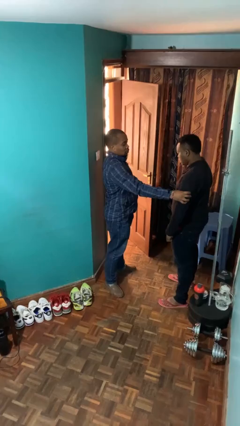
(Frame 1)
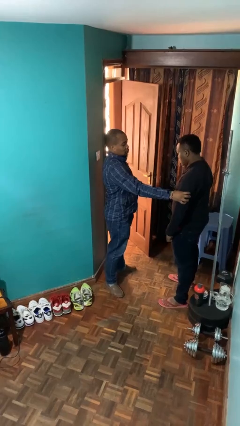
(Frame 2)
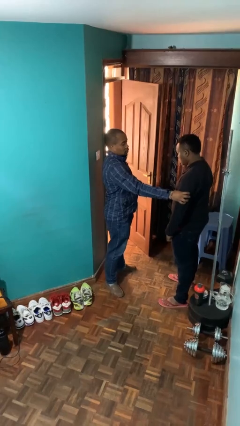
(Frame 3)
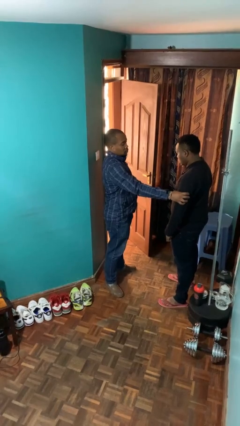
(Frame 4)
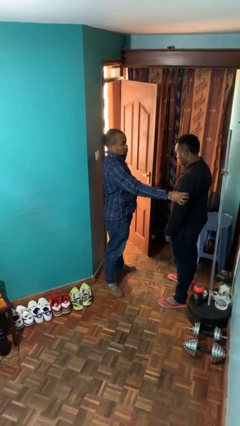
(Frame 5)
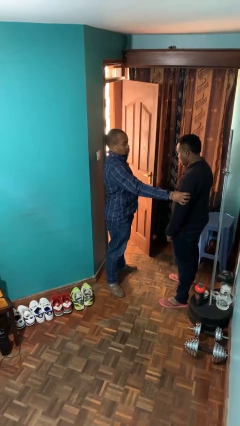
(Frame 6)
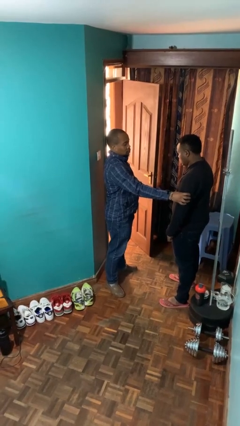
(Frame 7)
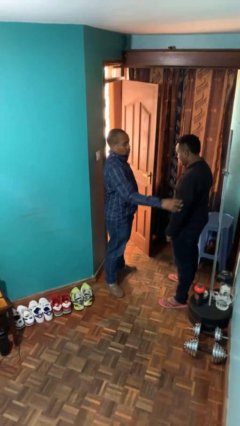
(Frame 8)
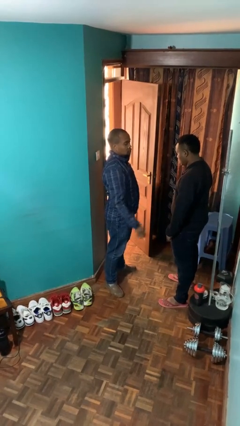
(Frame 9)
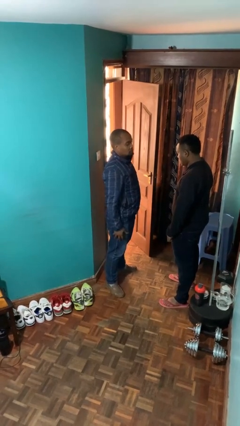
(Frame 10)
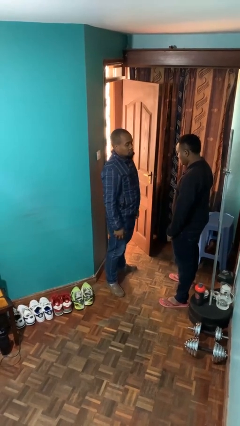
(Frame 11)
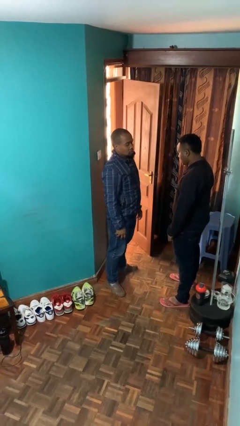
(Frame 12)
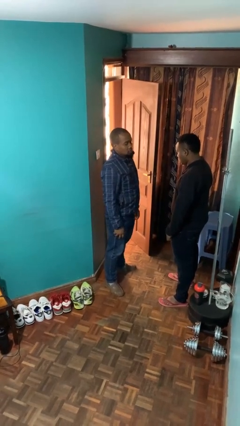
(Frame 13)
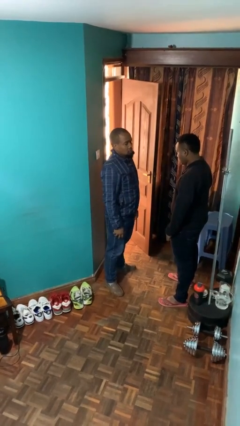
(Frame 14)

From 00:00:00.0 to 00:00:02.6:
person grabs person by bicep

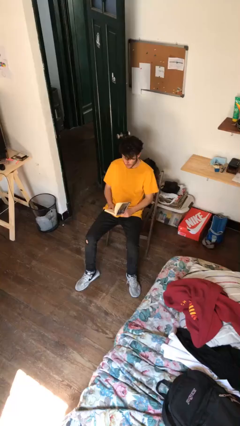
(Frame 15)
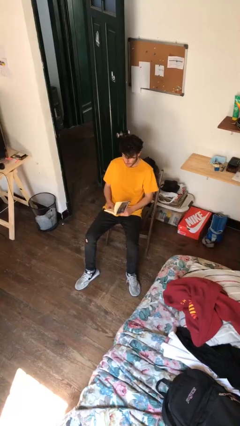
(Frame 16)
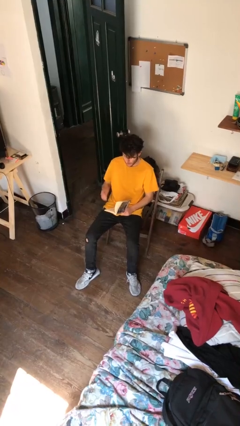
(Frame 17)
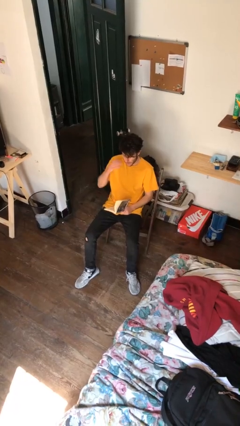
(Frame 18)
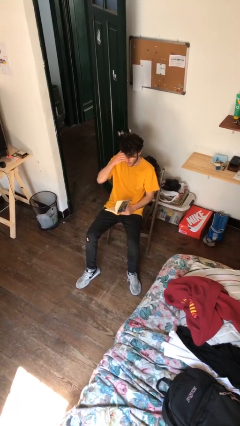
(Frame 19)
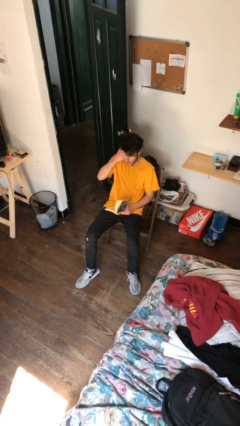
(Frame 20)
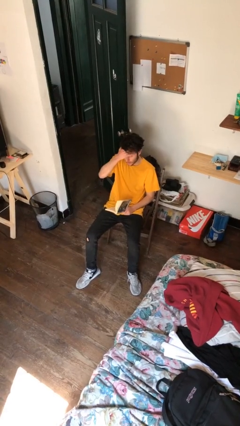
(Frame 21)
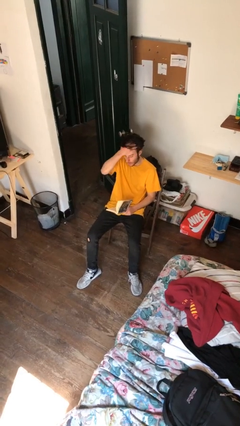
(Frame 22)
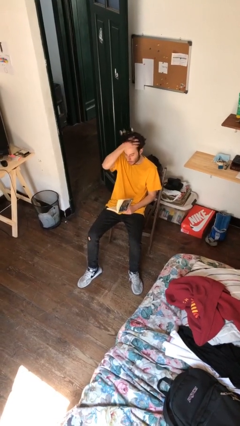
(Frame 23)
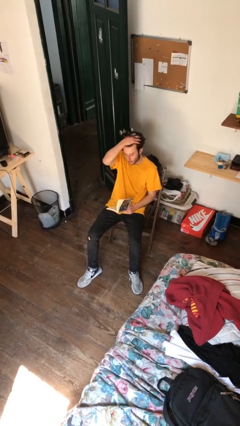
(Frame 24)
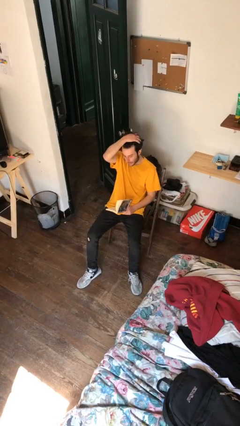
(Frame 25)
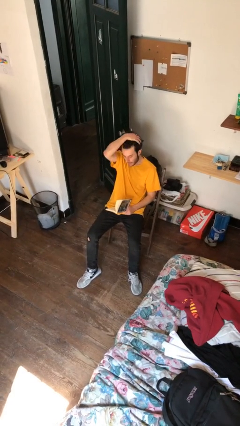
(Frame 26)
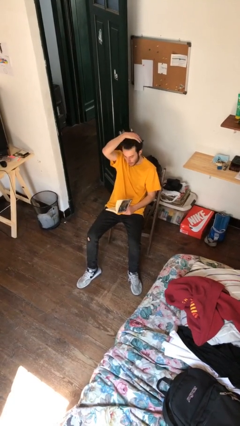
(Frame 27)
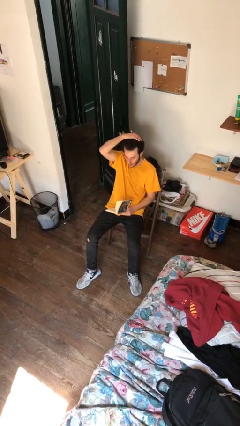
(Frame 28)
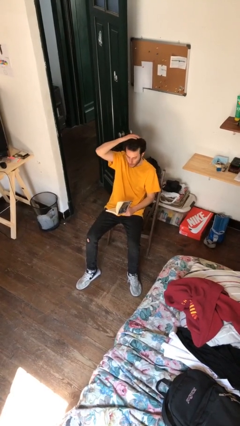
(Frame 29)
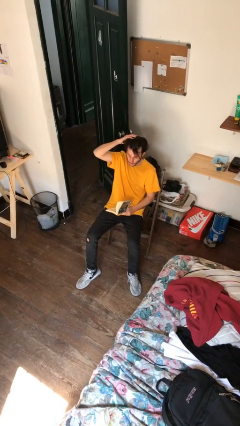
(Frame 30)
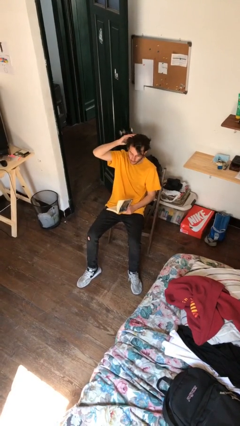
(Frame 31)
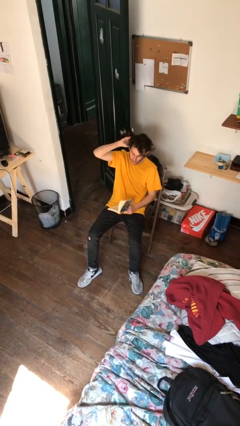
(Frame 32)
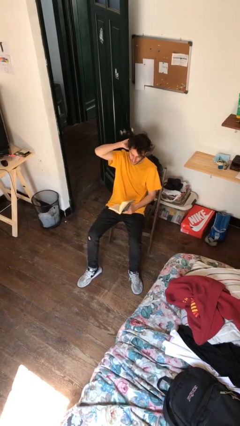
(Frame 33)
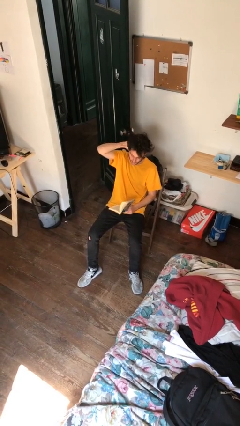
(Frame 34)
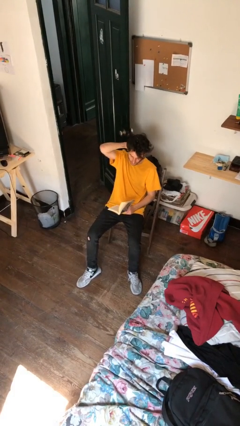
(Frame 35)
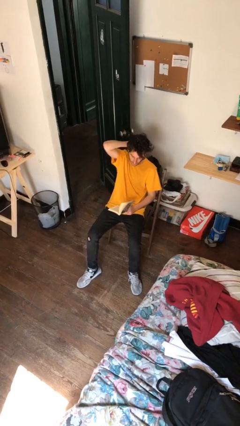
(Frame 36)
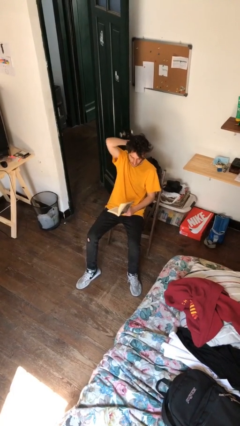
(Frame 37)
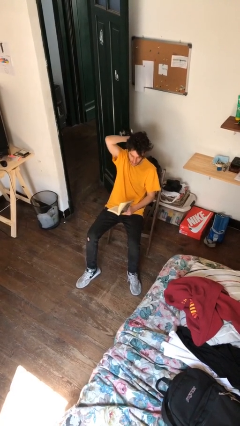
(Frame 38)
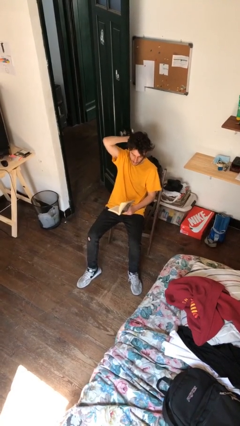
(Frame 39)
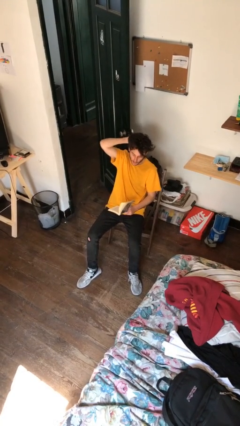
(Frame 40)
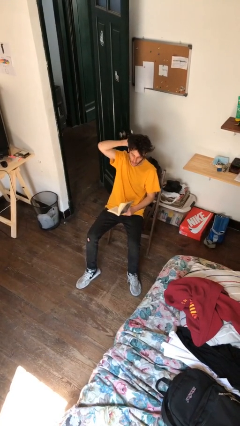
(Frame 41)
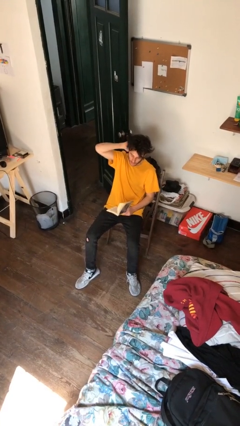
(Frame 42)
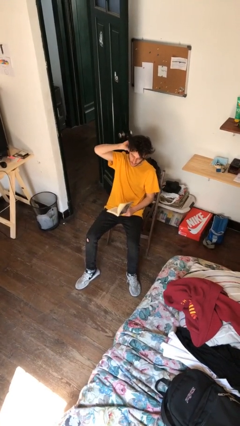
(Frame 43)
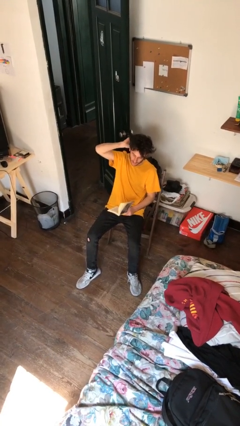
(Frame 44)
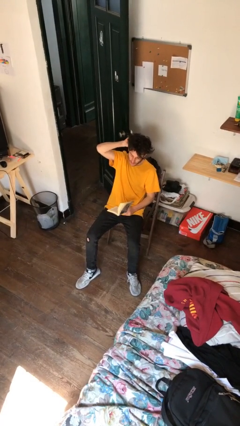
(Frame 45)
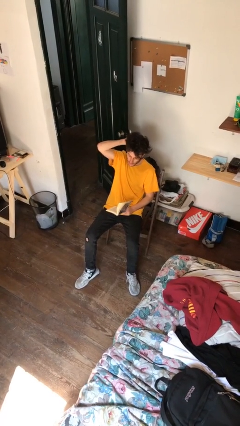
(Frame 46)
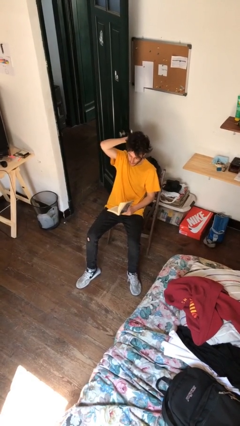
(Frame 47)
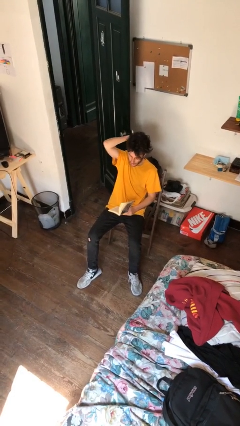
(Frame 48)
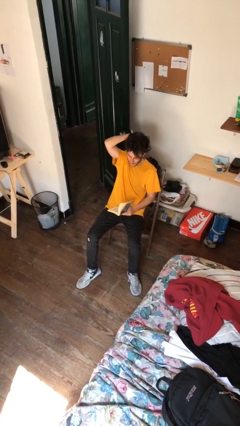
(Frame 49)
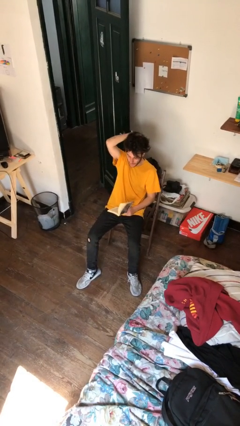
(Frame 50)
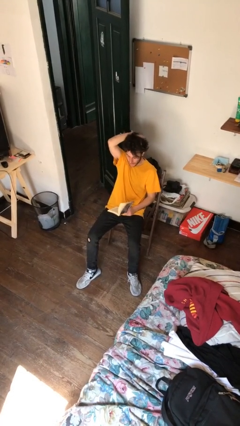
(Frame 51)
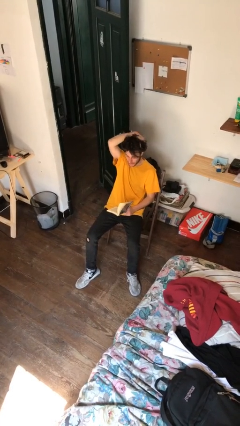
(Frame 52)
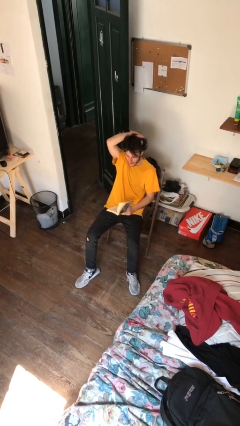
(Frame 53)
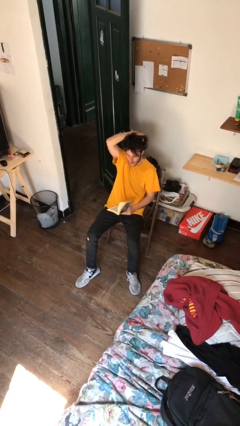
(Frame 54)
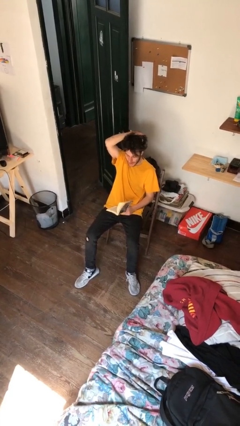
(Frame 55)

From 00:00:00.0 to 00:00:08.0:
person reads document

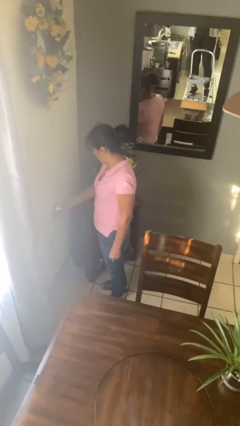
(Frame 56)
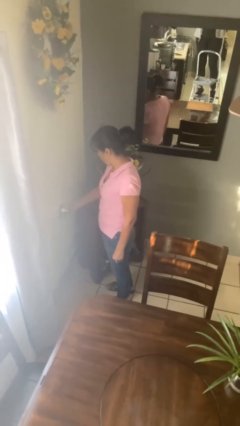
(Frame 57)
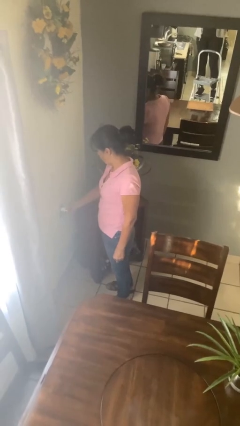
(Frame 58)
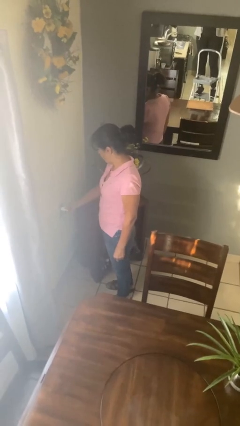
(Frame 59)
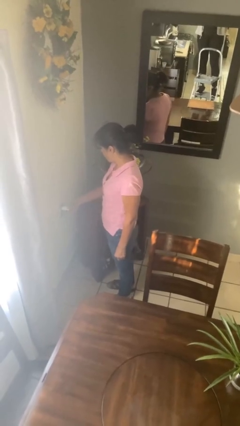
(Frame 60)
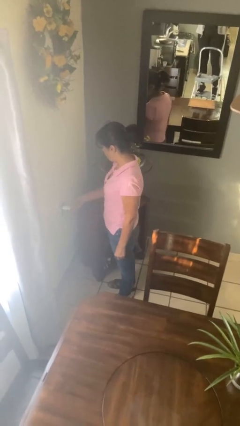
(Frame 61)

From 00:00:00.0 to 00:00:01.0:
person plugs into electrical socket

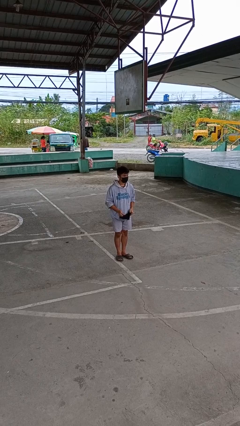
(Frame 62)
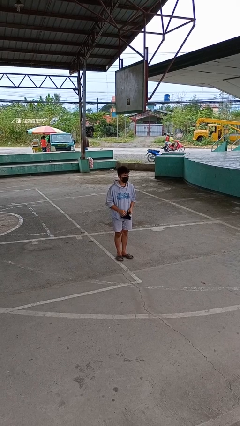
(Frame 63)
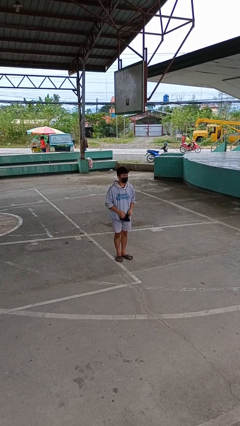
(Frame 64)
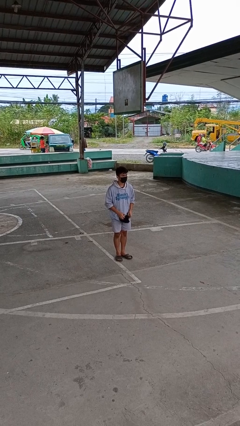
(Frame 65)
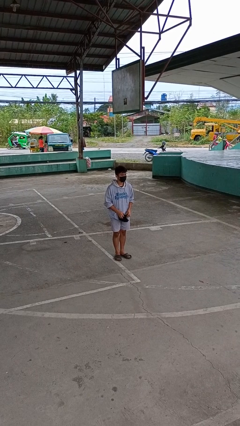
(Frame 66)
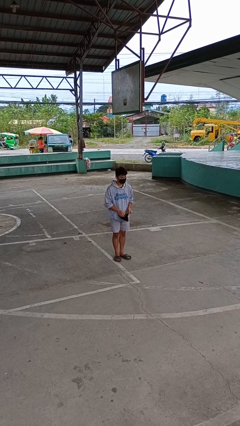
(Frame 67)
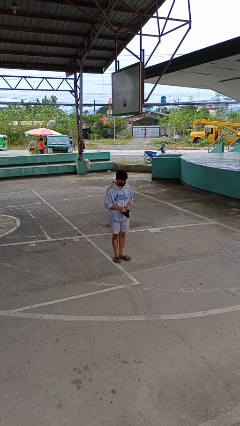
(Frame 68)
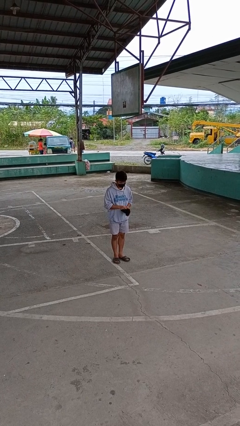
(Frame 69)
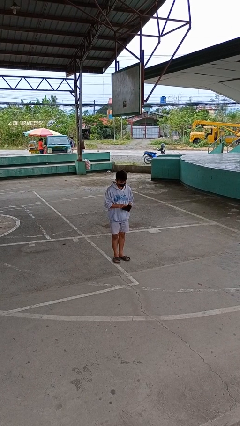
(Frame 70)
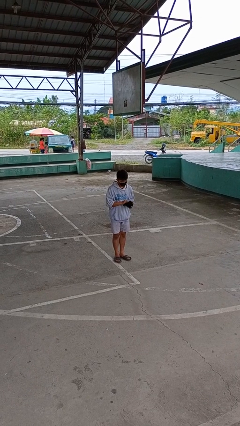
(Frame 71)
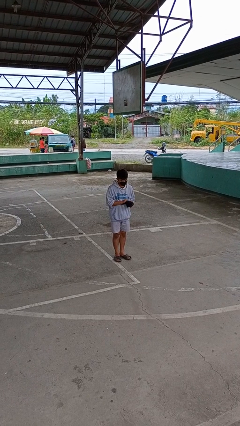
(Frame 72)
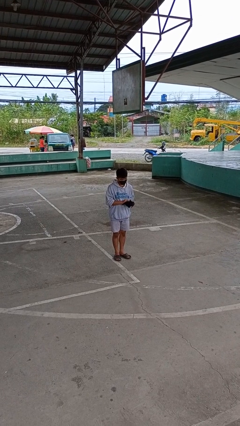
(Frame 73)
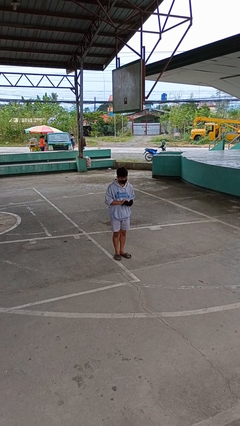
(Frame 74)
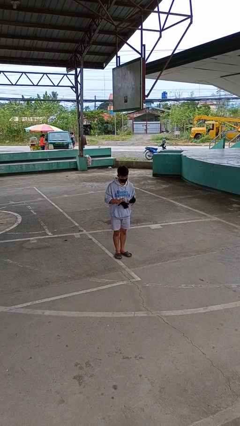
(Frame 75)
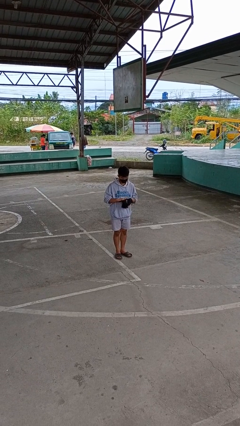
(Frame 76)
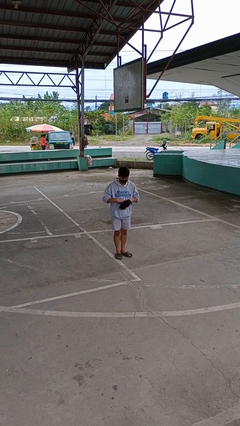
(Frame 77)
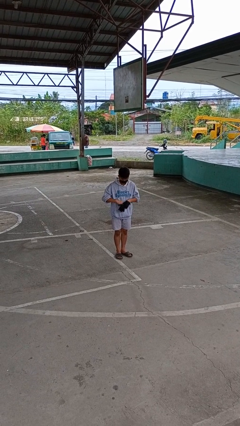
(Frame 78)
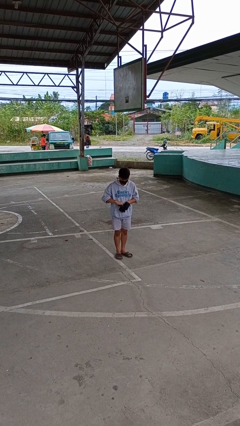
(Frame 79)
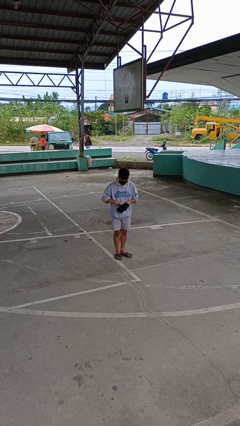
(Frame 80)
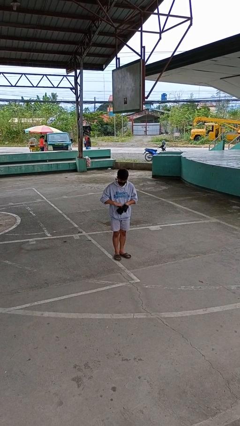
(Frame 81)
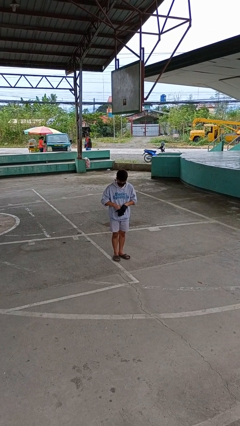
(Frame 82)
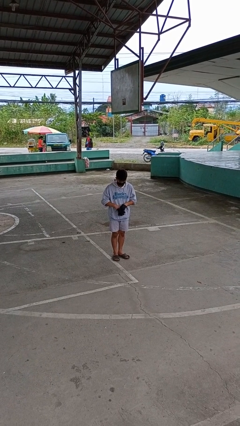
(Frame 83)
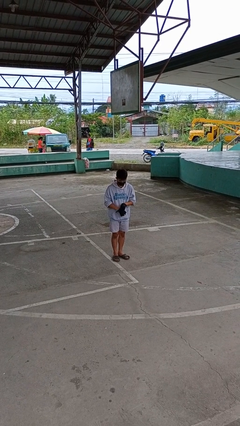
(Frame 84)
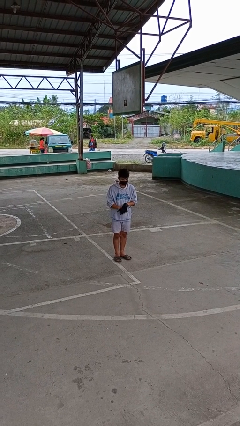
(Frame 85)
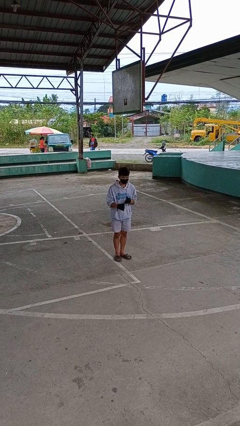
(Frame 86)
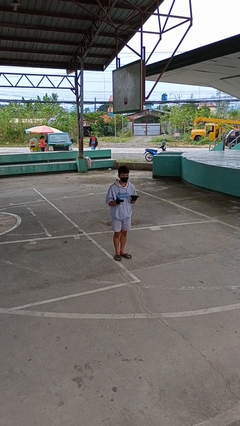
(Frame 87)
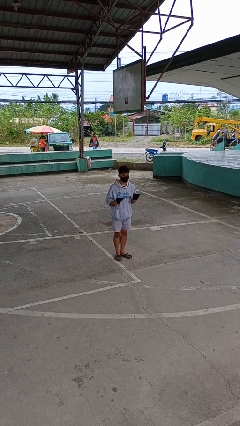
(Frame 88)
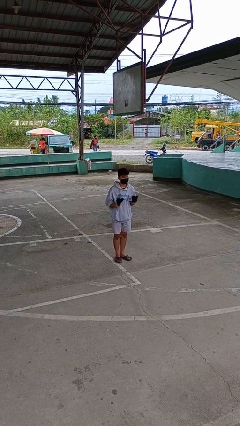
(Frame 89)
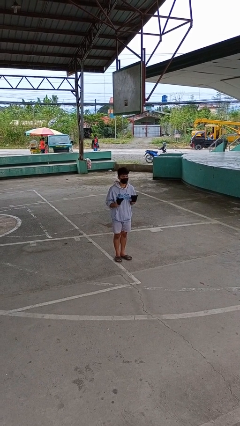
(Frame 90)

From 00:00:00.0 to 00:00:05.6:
person puts on gloves

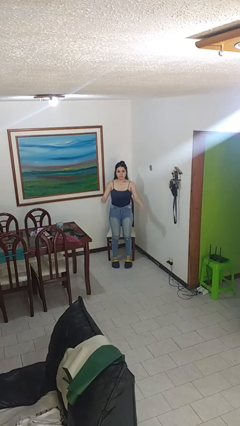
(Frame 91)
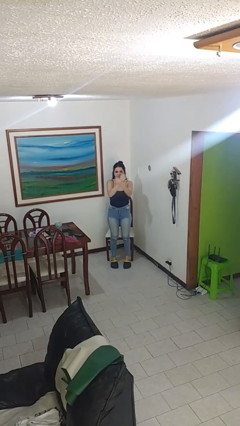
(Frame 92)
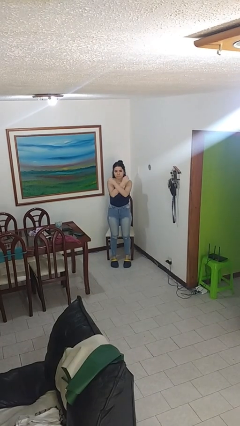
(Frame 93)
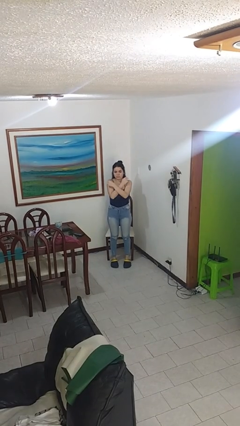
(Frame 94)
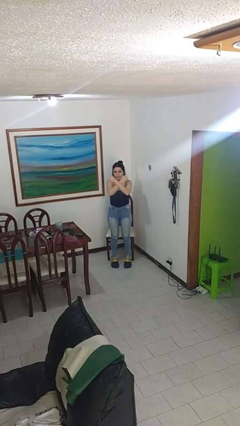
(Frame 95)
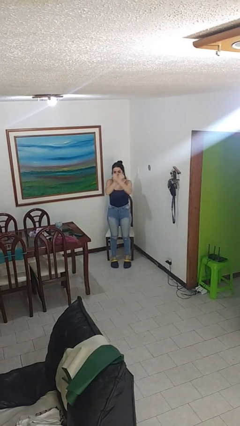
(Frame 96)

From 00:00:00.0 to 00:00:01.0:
person gestures arms x
